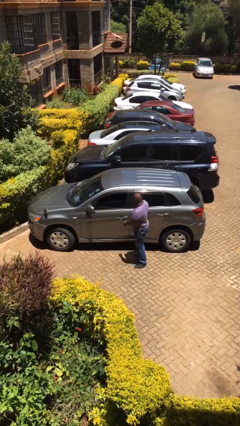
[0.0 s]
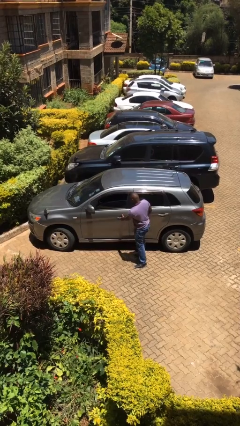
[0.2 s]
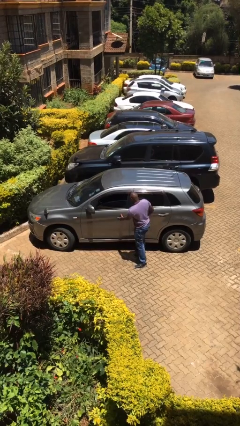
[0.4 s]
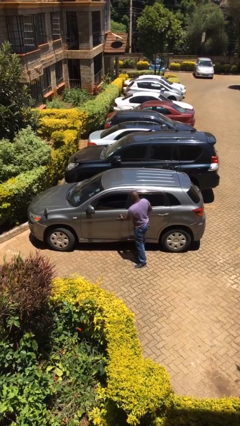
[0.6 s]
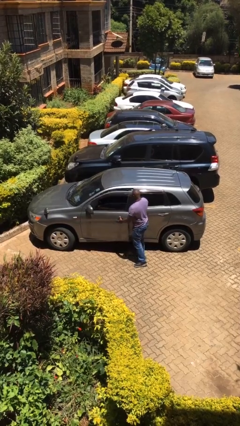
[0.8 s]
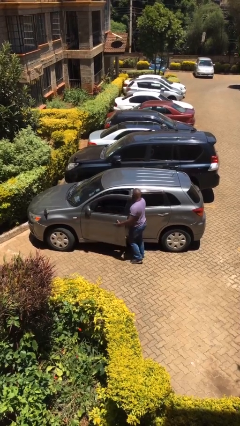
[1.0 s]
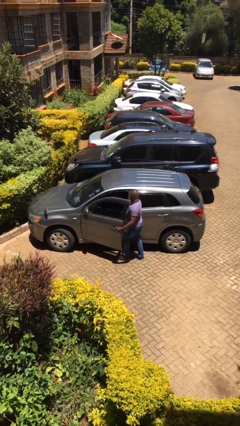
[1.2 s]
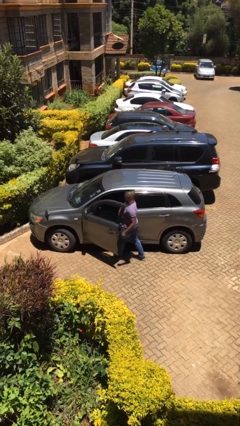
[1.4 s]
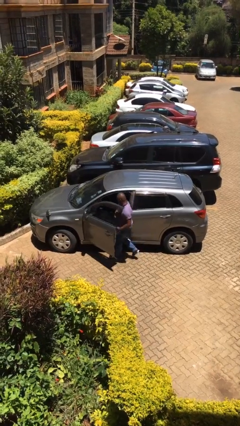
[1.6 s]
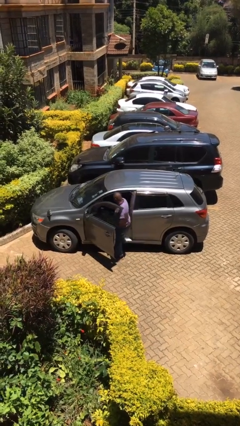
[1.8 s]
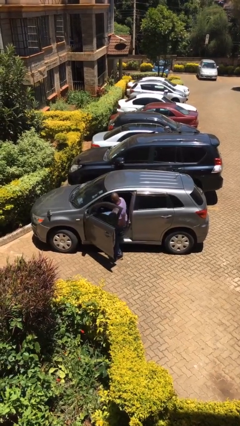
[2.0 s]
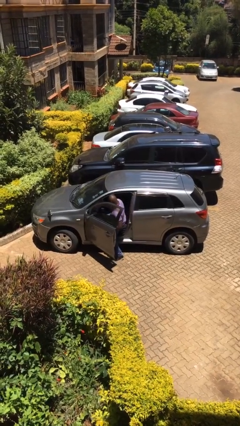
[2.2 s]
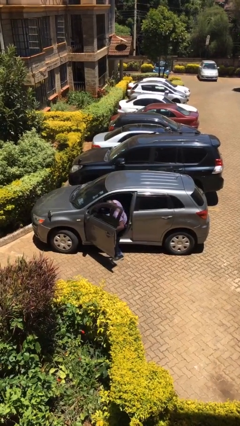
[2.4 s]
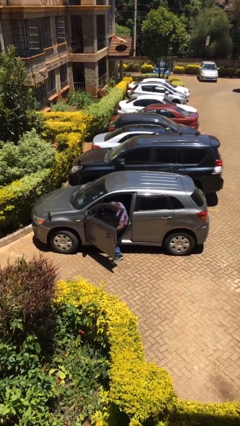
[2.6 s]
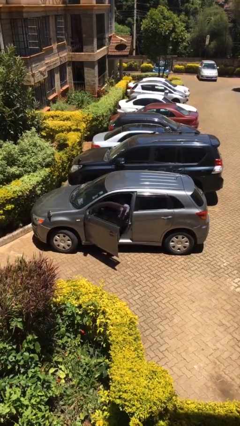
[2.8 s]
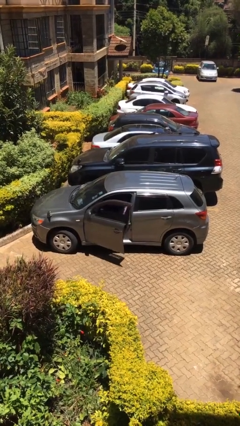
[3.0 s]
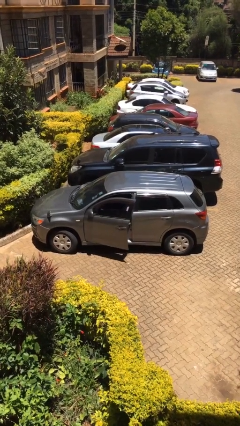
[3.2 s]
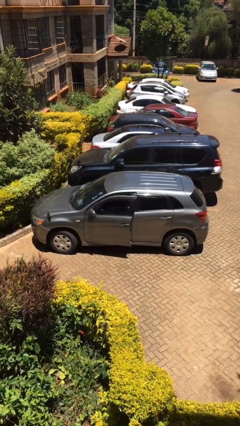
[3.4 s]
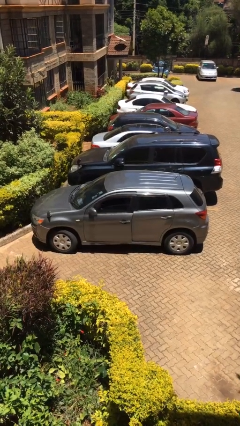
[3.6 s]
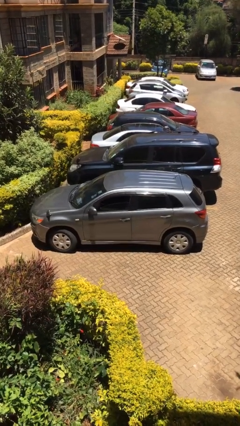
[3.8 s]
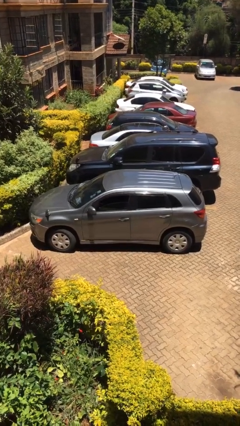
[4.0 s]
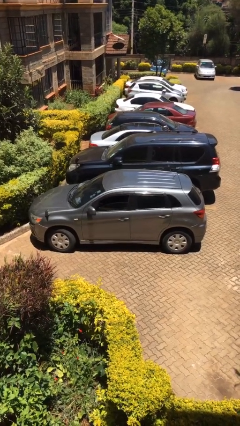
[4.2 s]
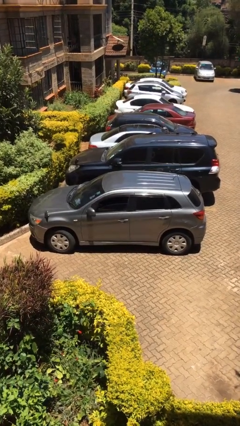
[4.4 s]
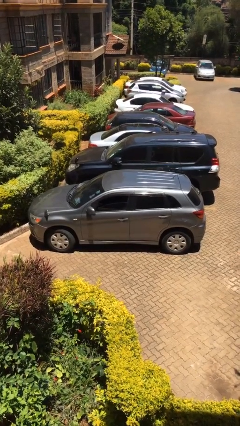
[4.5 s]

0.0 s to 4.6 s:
car picks up person

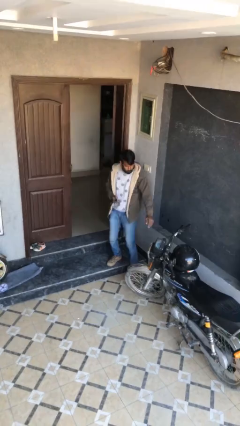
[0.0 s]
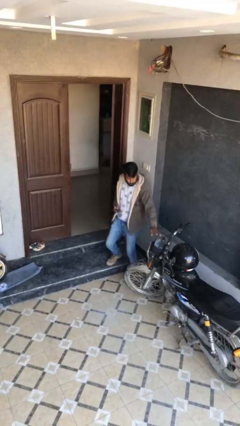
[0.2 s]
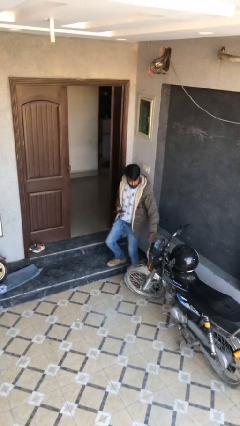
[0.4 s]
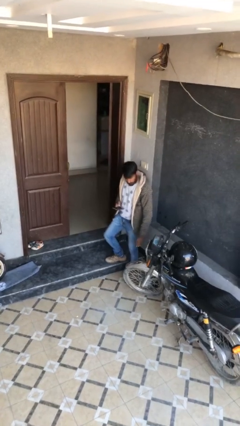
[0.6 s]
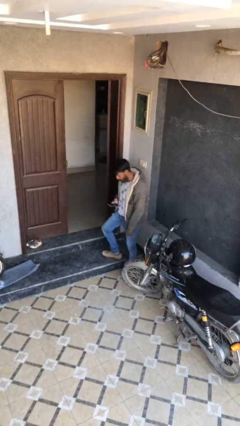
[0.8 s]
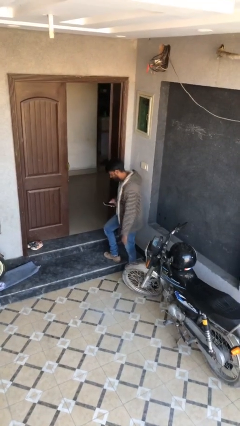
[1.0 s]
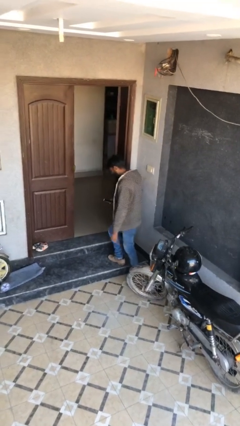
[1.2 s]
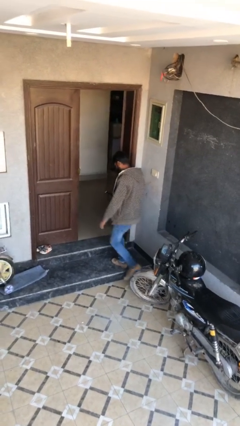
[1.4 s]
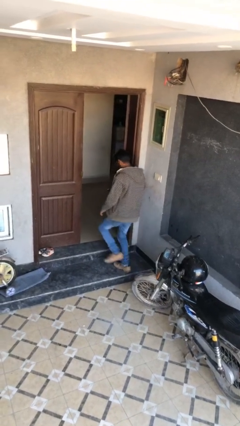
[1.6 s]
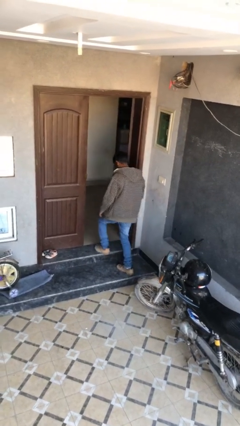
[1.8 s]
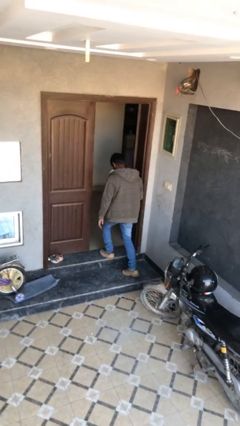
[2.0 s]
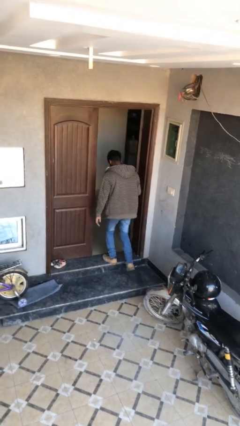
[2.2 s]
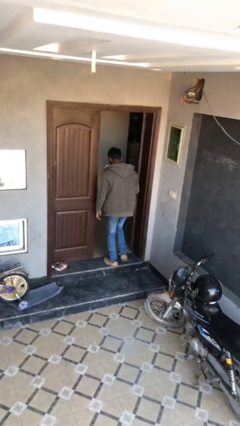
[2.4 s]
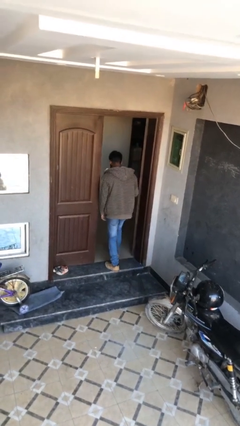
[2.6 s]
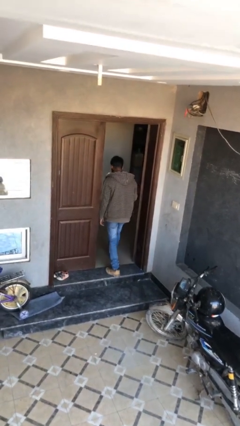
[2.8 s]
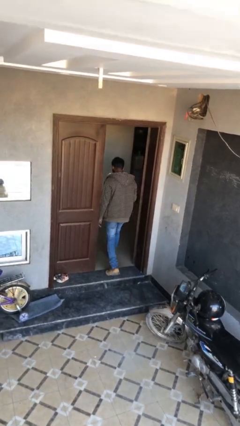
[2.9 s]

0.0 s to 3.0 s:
person exits scene through structure

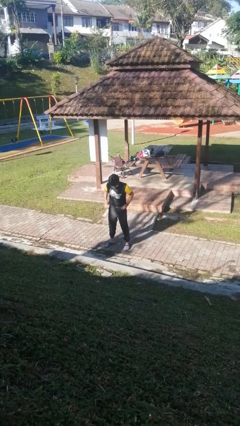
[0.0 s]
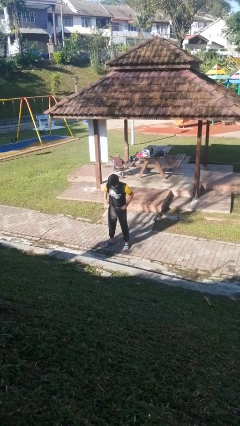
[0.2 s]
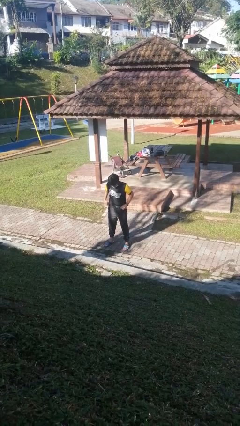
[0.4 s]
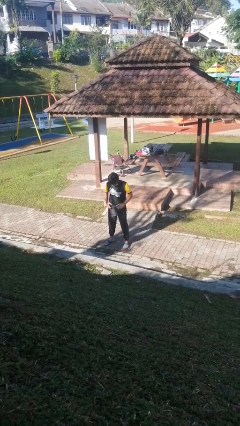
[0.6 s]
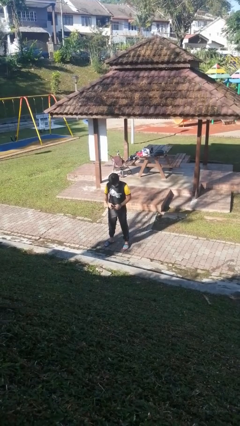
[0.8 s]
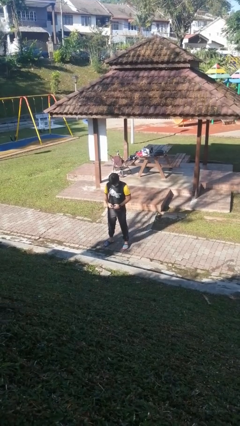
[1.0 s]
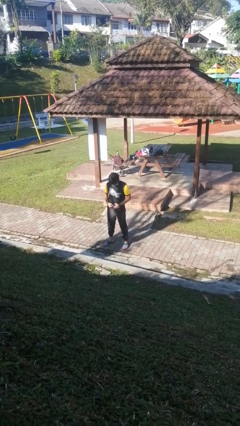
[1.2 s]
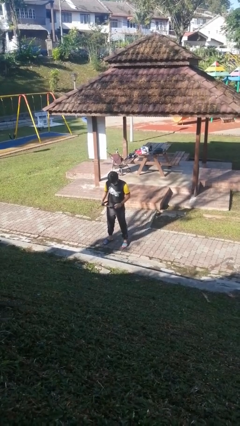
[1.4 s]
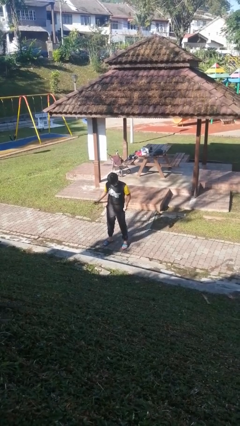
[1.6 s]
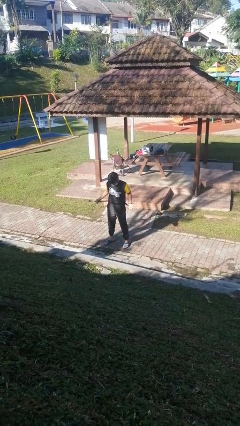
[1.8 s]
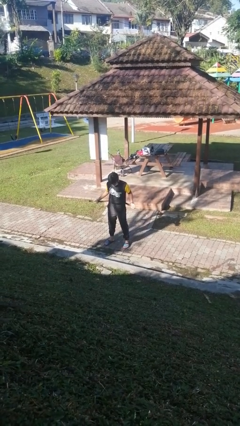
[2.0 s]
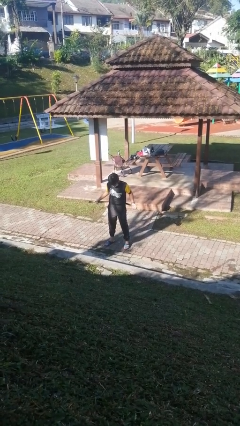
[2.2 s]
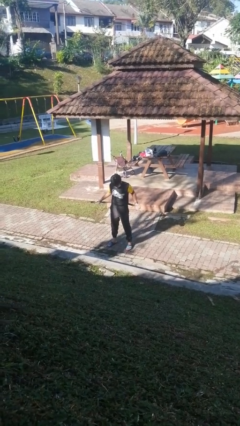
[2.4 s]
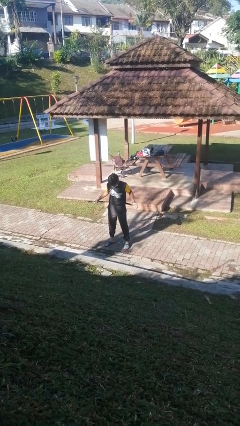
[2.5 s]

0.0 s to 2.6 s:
person takes off belt

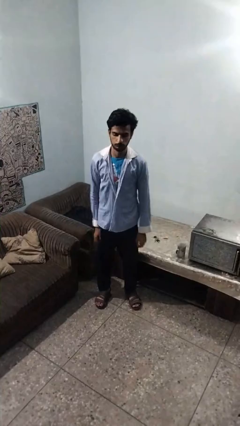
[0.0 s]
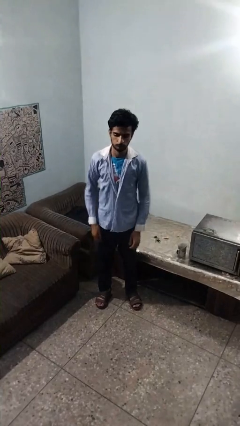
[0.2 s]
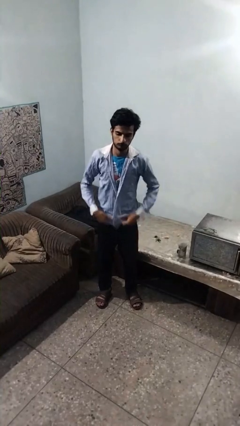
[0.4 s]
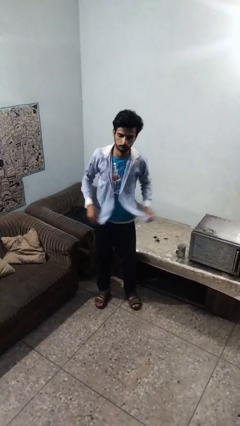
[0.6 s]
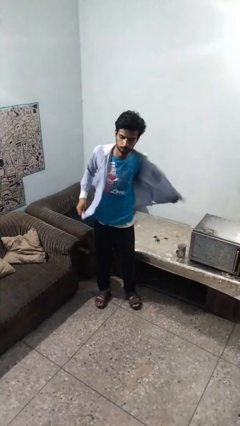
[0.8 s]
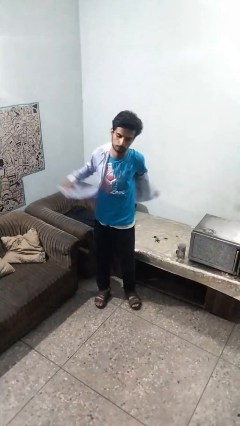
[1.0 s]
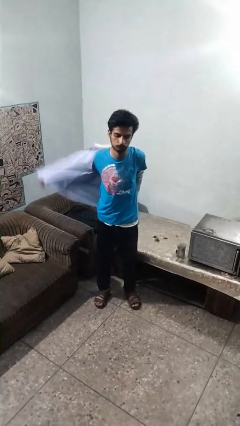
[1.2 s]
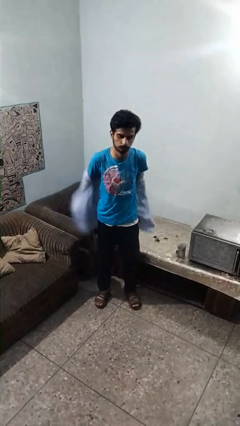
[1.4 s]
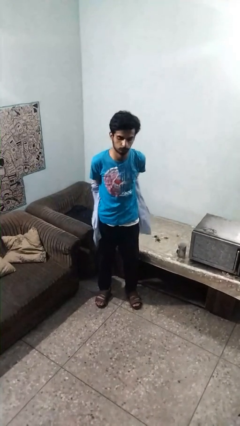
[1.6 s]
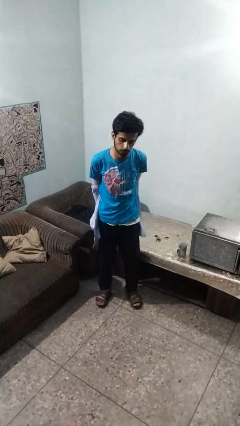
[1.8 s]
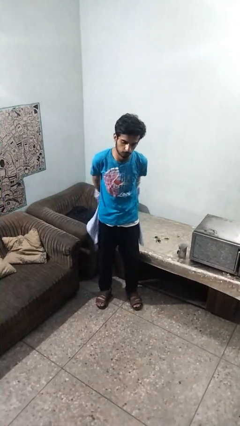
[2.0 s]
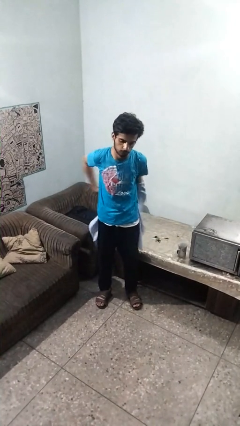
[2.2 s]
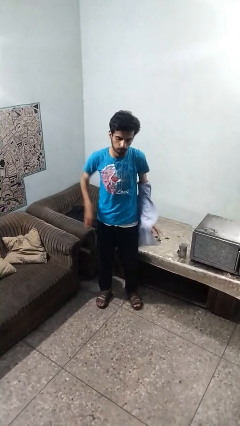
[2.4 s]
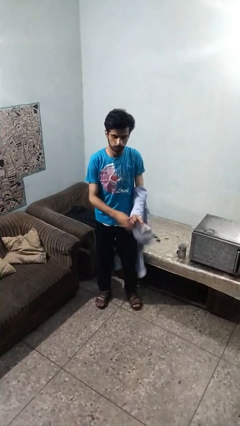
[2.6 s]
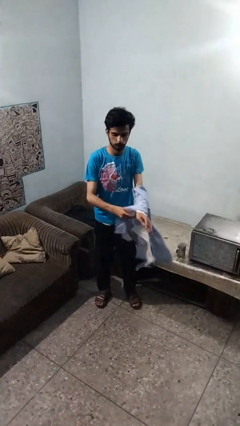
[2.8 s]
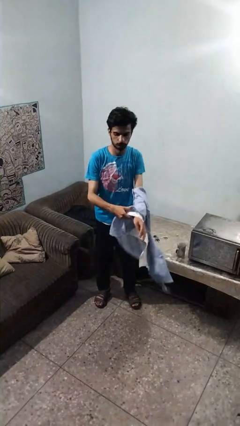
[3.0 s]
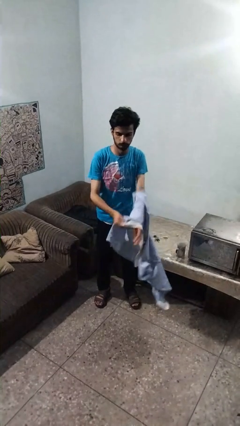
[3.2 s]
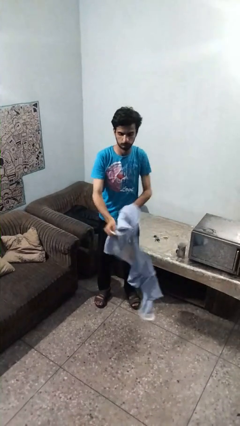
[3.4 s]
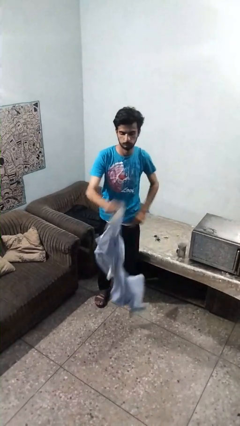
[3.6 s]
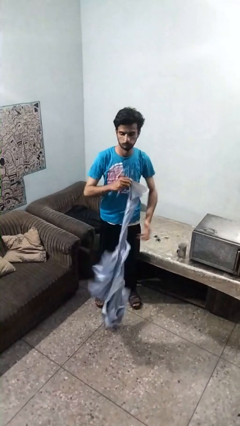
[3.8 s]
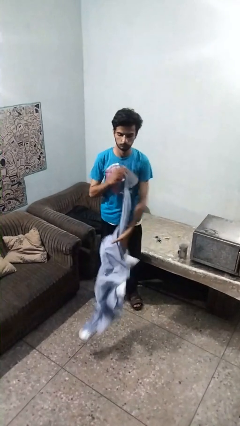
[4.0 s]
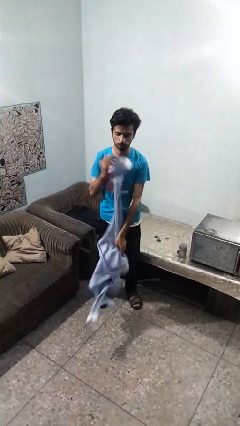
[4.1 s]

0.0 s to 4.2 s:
person takes off shirt

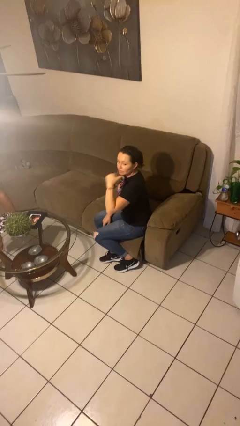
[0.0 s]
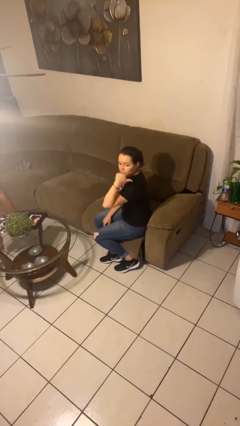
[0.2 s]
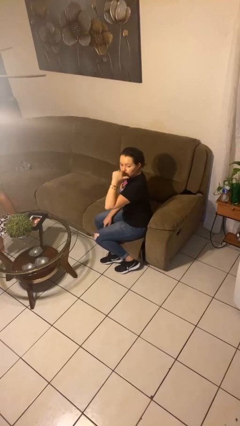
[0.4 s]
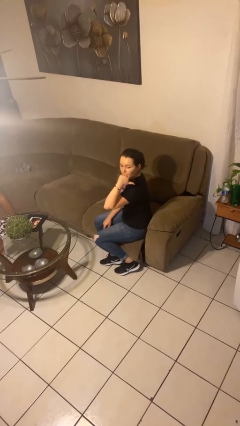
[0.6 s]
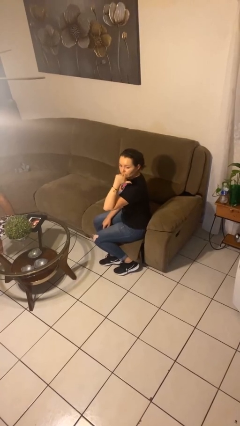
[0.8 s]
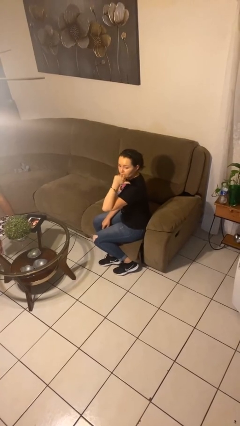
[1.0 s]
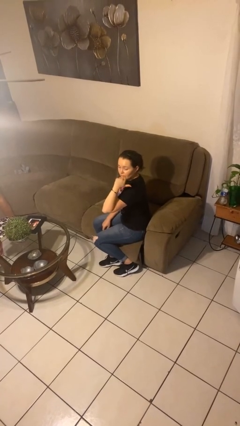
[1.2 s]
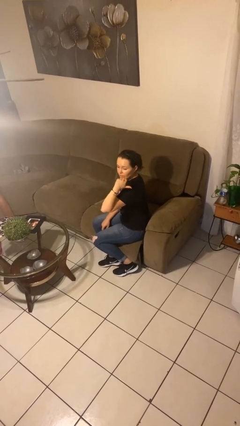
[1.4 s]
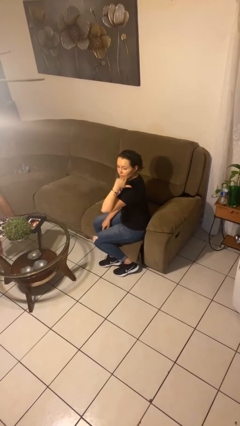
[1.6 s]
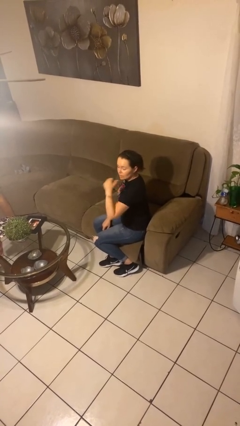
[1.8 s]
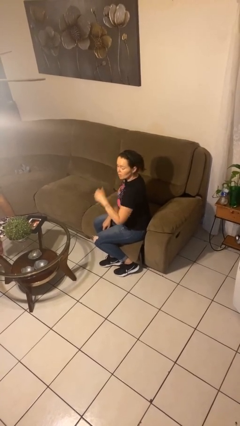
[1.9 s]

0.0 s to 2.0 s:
person gestures behind me

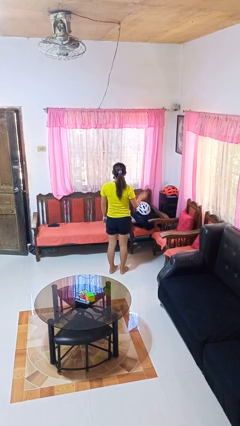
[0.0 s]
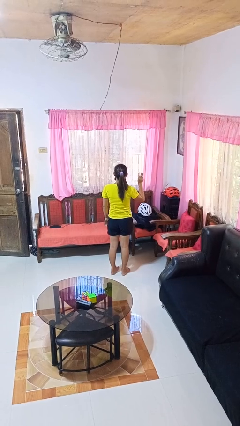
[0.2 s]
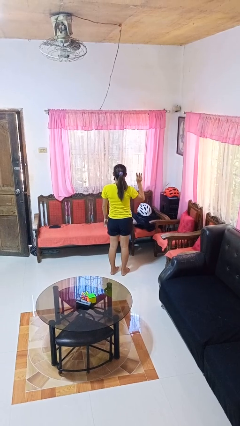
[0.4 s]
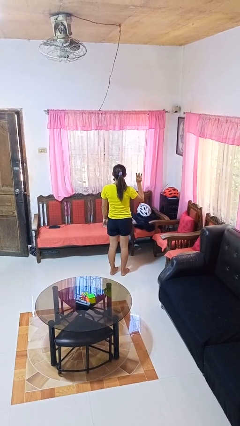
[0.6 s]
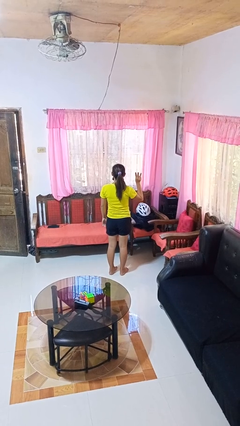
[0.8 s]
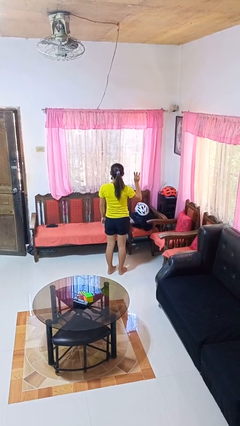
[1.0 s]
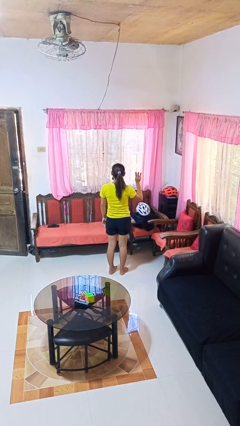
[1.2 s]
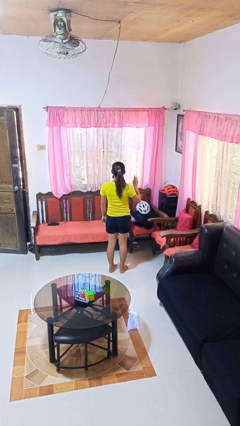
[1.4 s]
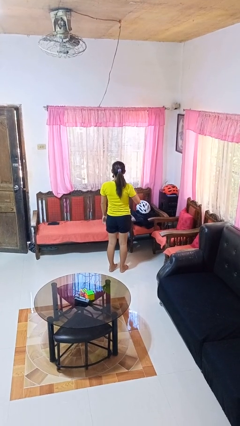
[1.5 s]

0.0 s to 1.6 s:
person gestures number three
